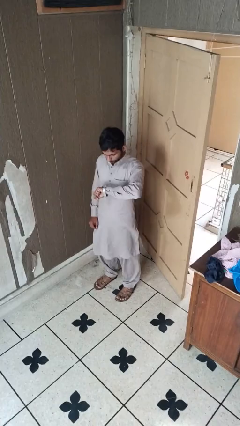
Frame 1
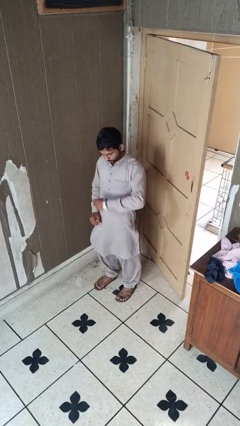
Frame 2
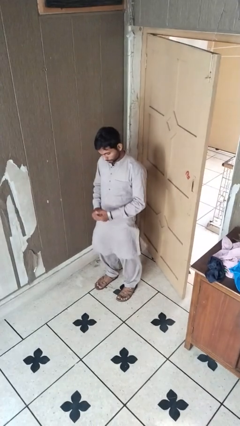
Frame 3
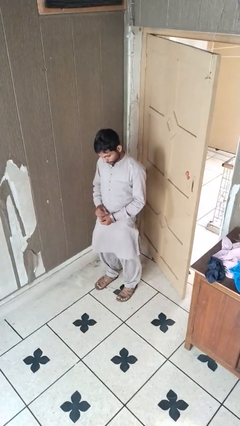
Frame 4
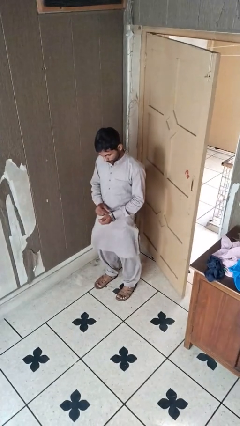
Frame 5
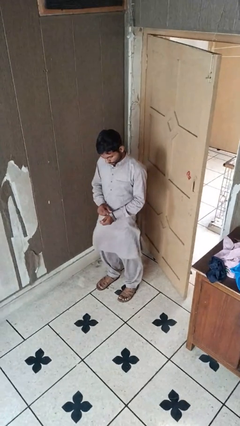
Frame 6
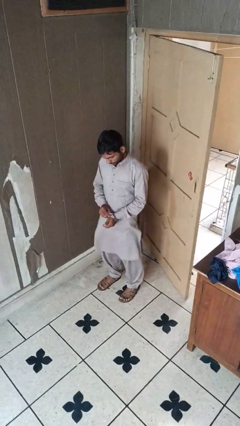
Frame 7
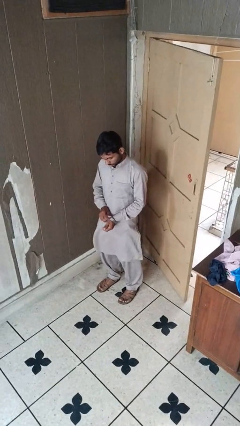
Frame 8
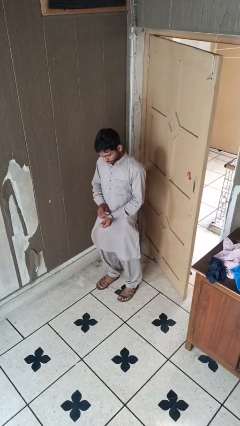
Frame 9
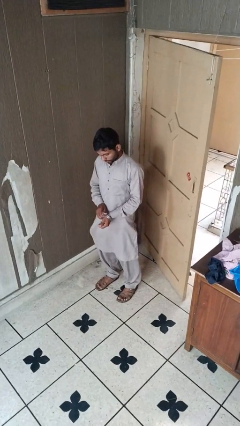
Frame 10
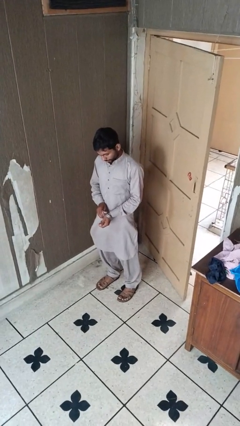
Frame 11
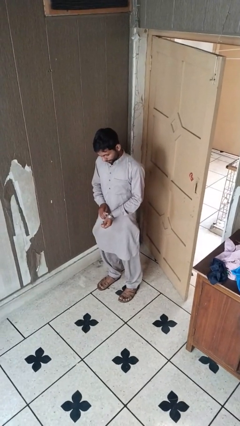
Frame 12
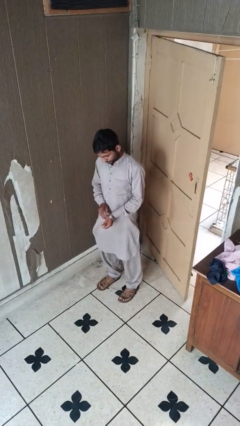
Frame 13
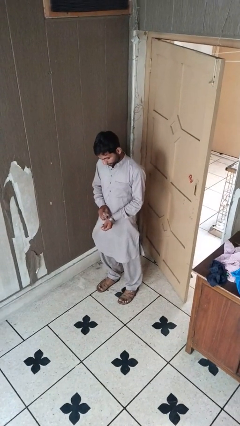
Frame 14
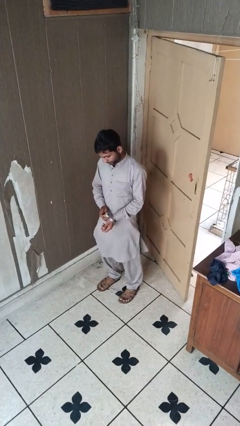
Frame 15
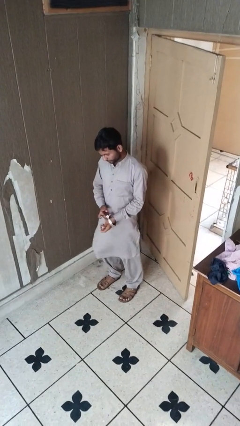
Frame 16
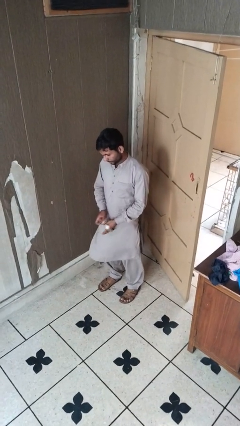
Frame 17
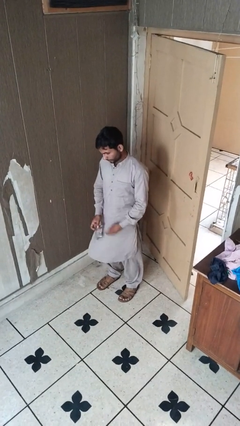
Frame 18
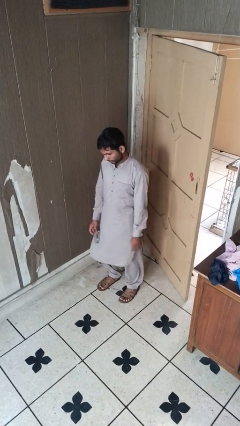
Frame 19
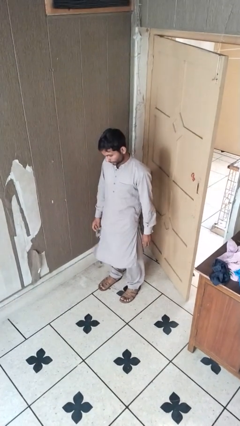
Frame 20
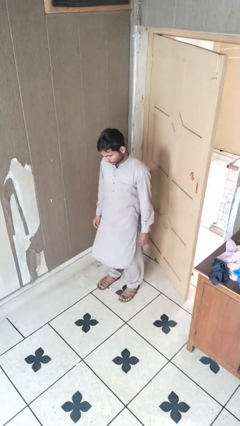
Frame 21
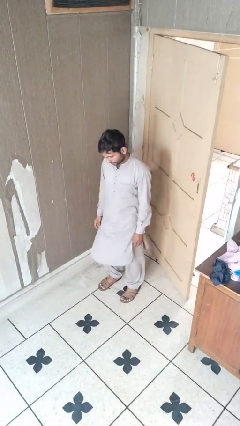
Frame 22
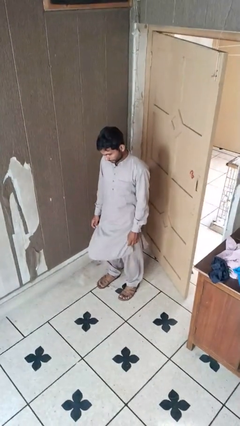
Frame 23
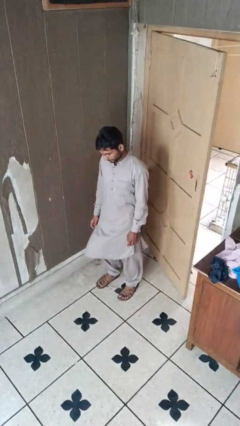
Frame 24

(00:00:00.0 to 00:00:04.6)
person takes off wristwatch

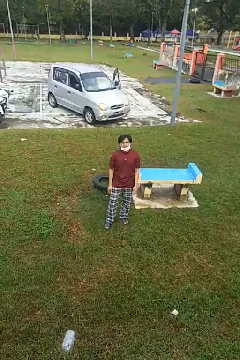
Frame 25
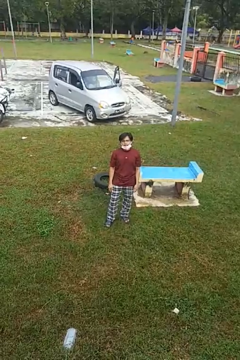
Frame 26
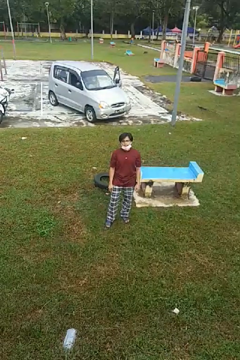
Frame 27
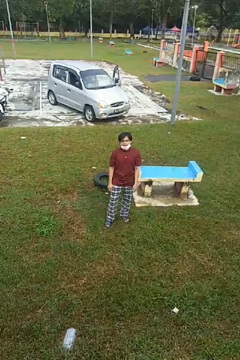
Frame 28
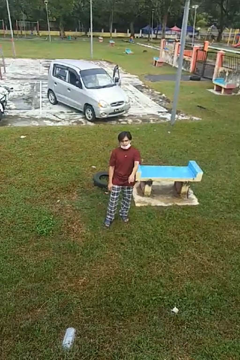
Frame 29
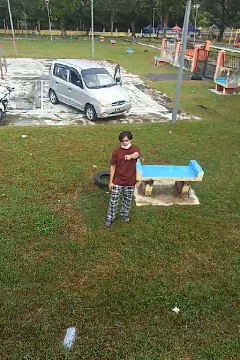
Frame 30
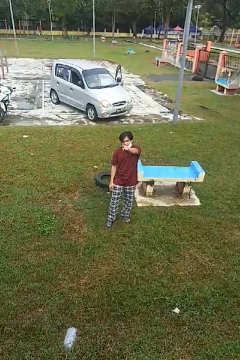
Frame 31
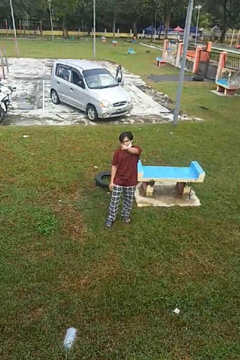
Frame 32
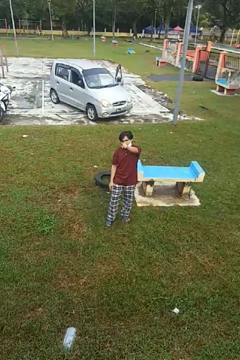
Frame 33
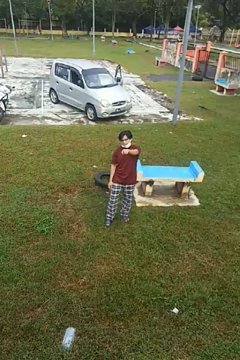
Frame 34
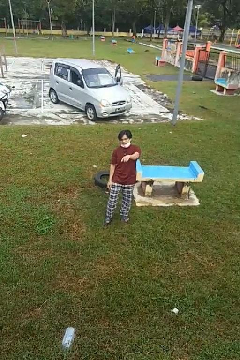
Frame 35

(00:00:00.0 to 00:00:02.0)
person points at person

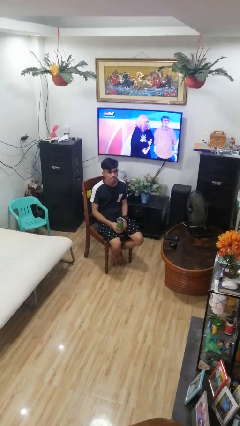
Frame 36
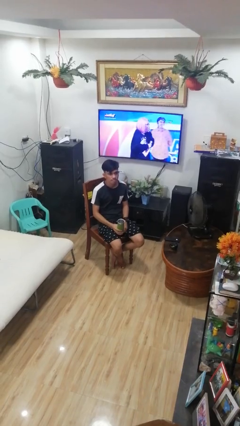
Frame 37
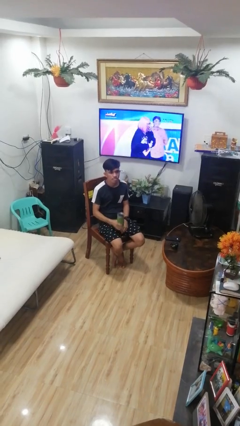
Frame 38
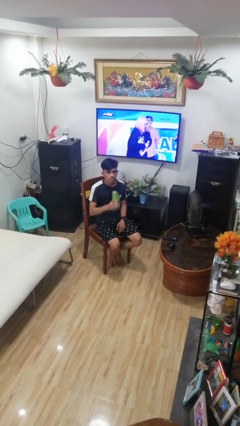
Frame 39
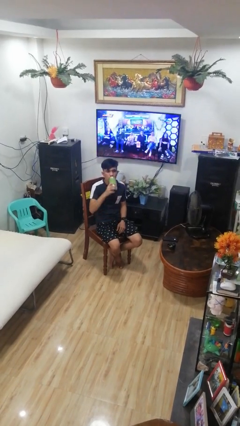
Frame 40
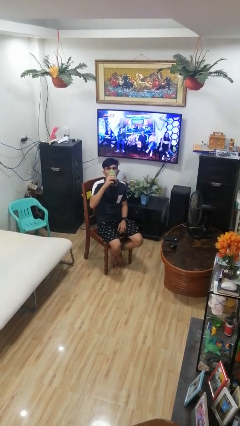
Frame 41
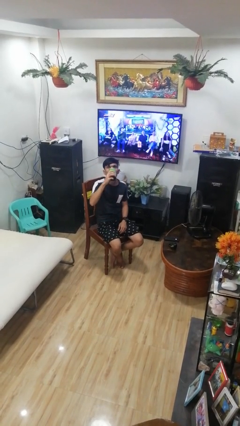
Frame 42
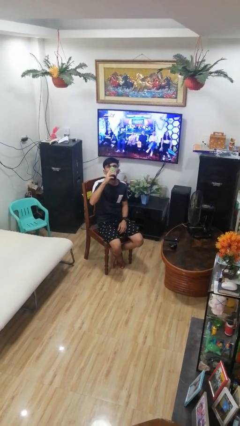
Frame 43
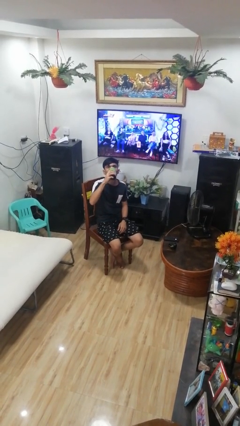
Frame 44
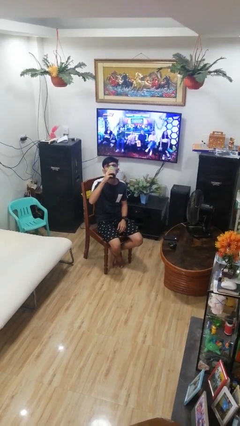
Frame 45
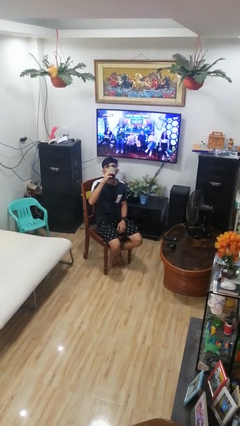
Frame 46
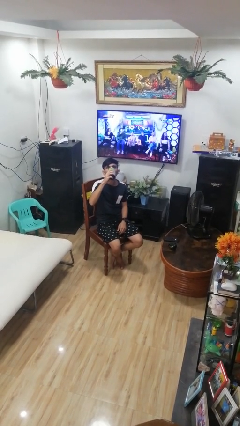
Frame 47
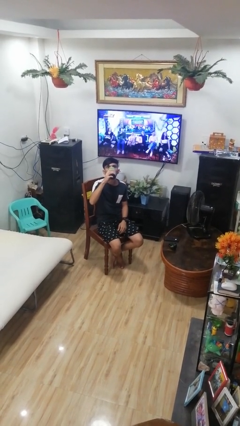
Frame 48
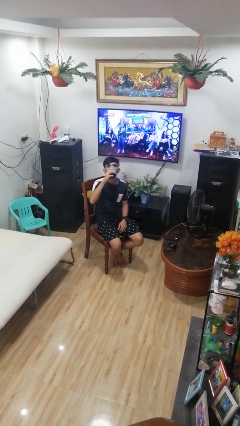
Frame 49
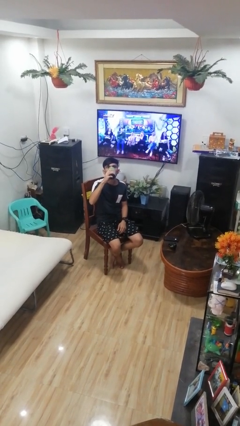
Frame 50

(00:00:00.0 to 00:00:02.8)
person drinks from bottle

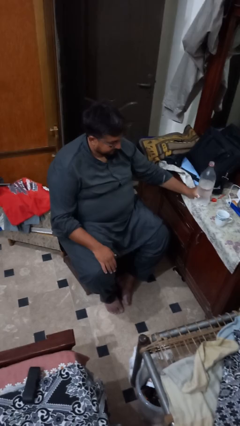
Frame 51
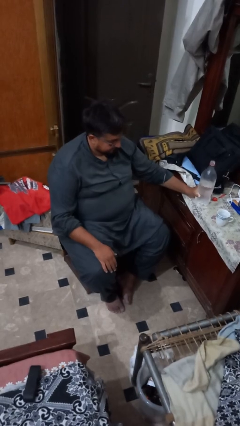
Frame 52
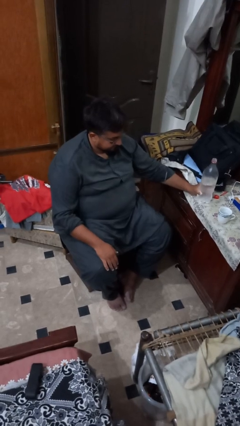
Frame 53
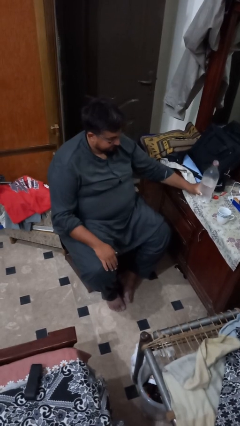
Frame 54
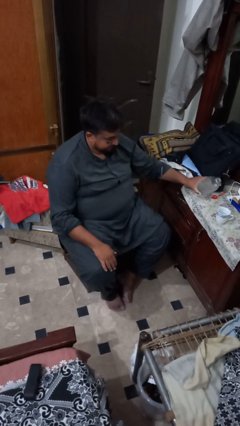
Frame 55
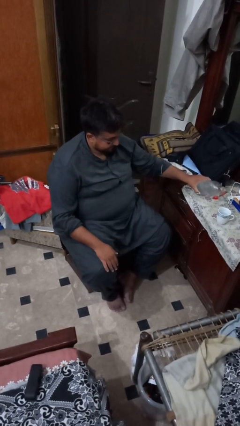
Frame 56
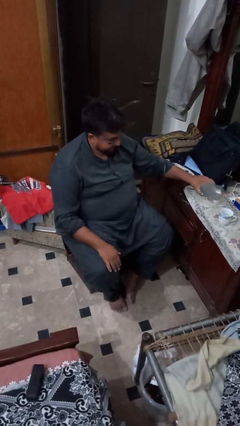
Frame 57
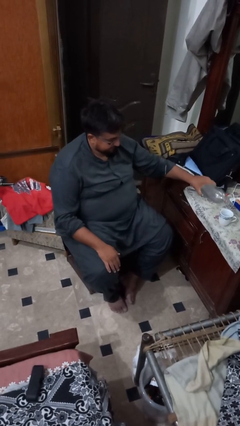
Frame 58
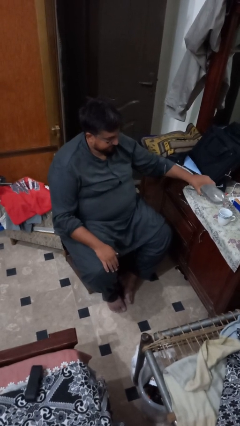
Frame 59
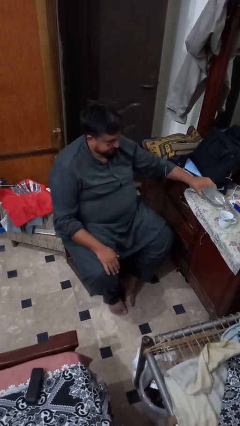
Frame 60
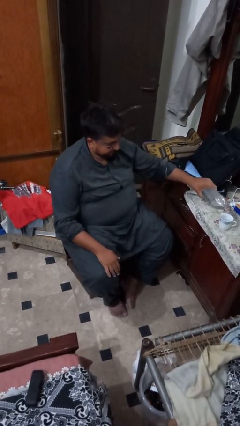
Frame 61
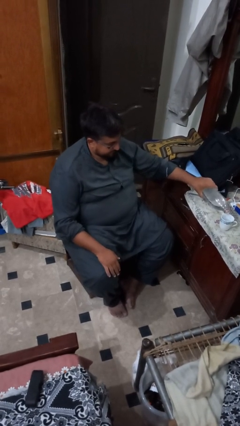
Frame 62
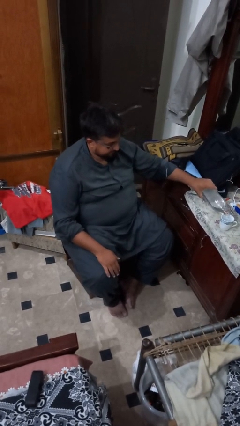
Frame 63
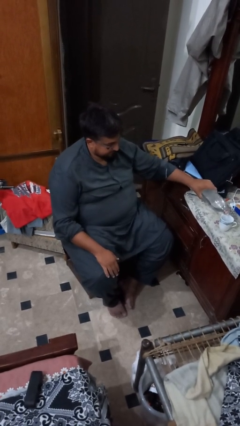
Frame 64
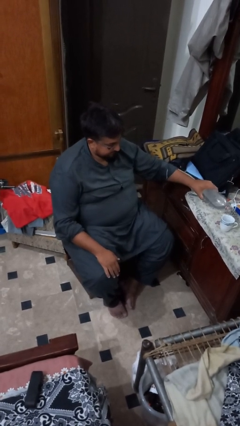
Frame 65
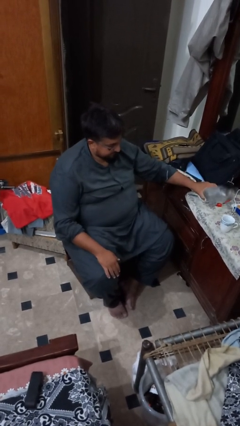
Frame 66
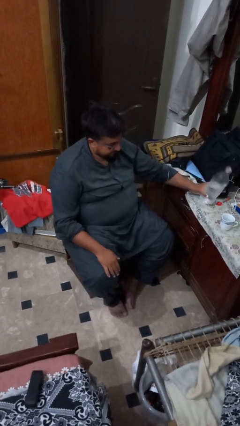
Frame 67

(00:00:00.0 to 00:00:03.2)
person pours liquid into cup

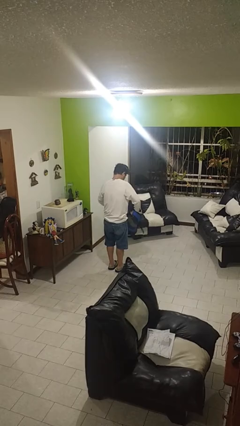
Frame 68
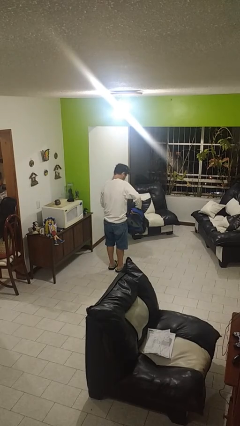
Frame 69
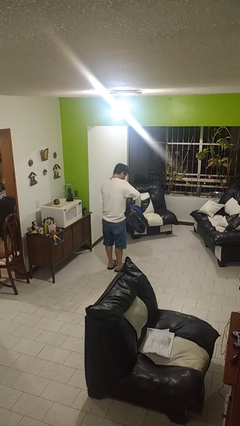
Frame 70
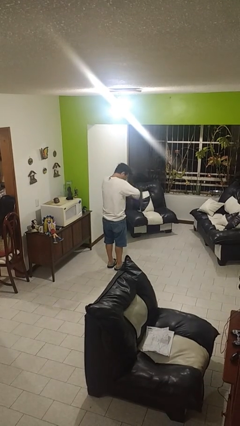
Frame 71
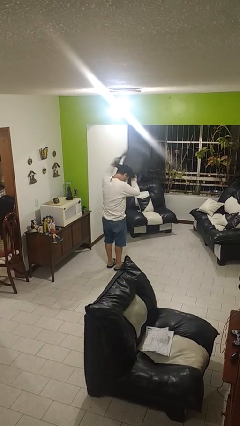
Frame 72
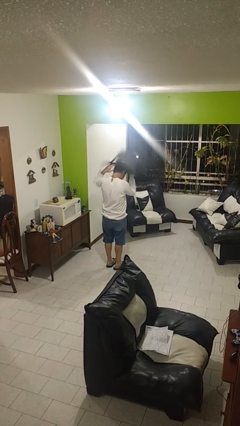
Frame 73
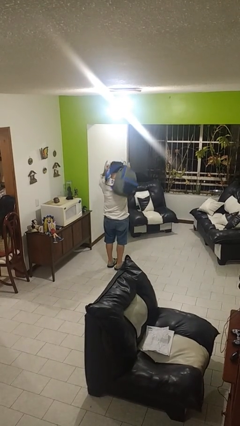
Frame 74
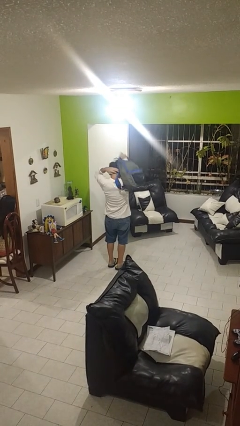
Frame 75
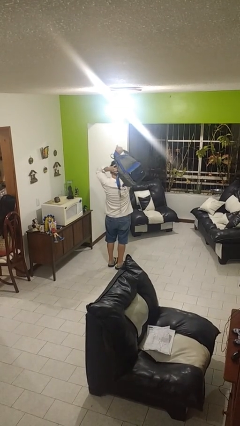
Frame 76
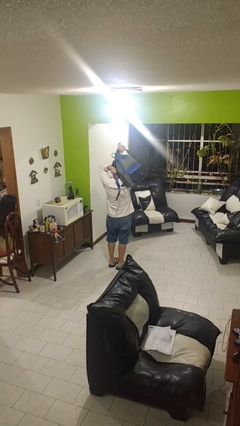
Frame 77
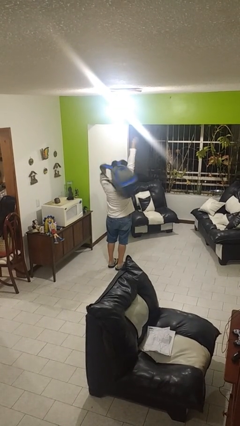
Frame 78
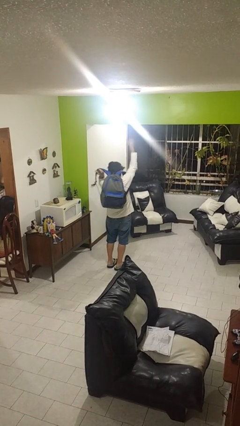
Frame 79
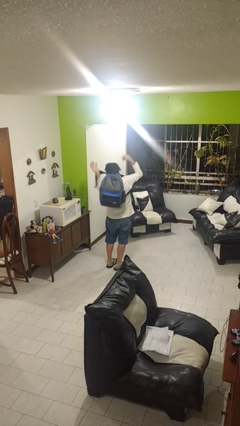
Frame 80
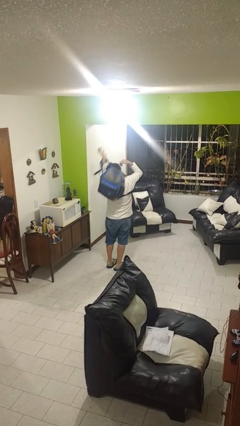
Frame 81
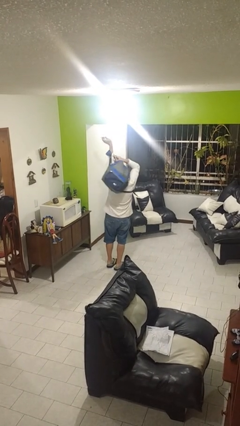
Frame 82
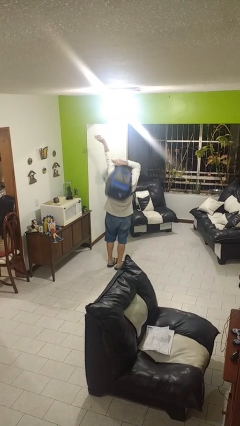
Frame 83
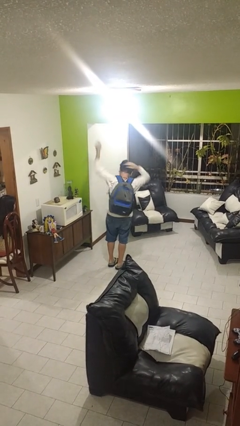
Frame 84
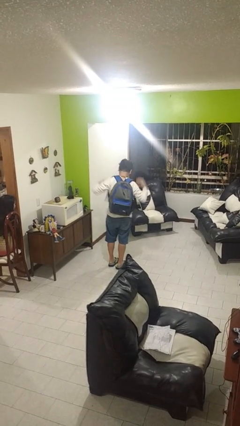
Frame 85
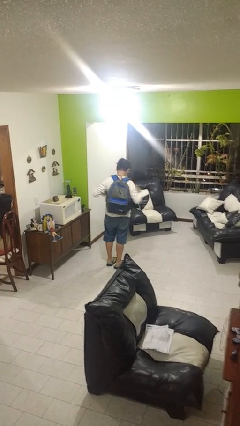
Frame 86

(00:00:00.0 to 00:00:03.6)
person puts on backpack

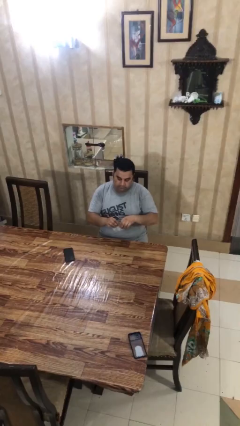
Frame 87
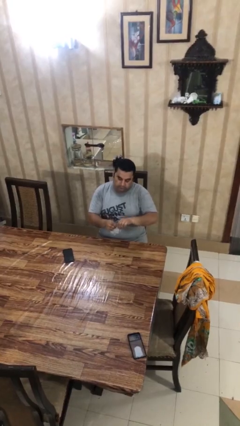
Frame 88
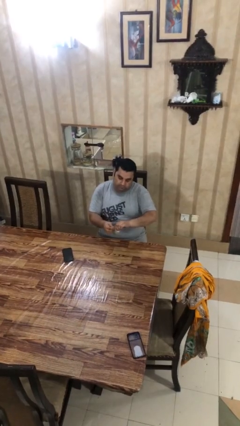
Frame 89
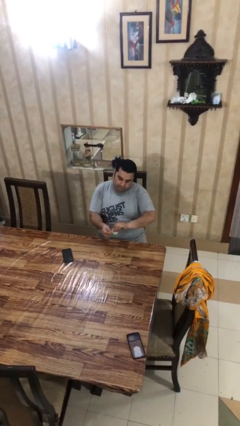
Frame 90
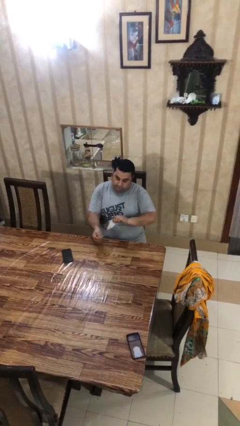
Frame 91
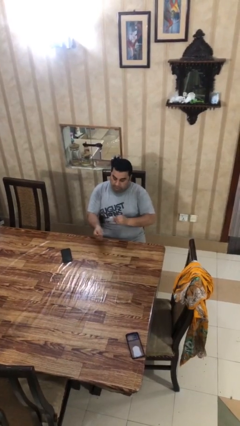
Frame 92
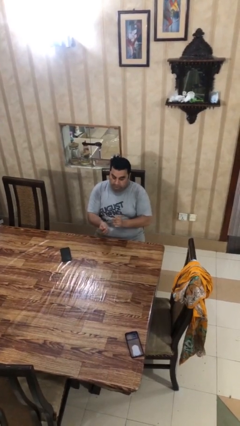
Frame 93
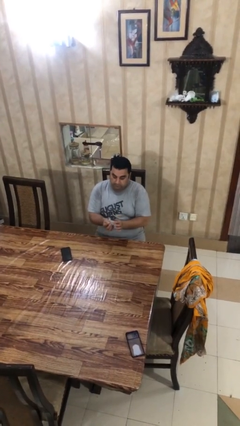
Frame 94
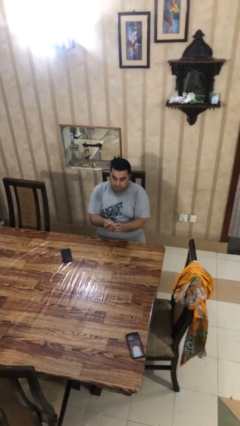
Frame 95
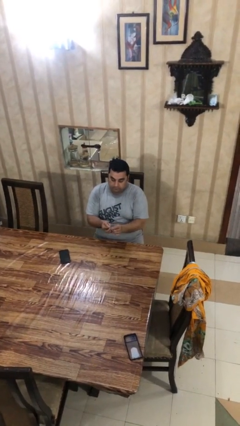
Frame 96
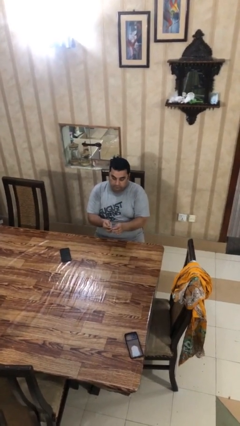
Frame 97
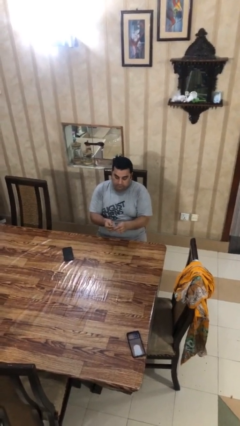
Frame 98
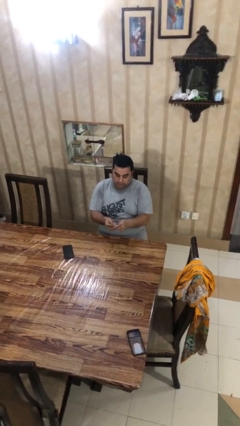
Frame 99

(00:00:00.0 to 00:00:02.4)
person tears paper
